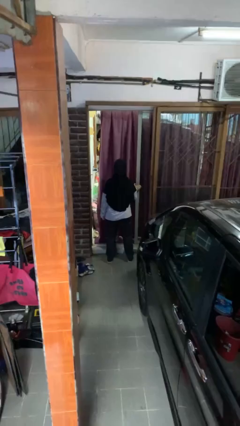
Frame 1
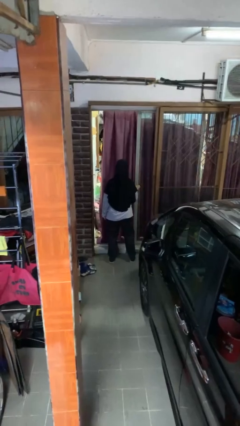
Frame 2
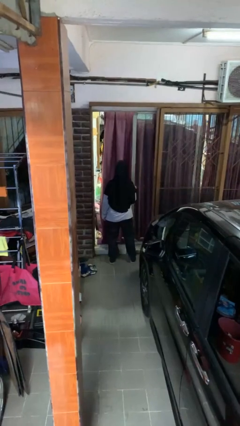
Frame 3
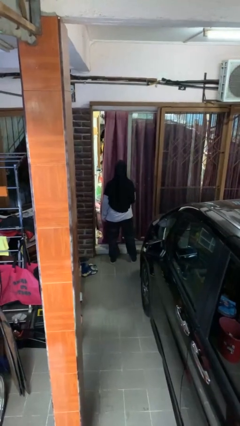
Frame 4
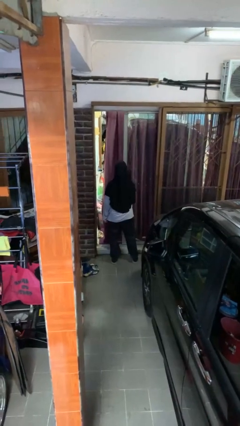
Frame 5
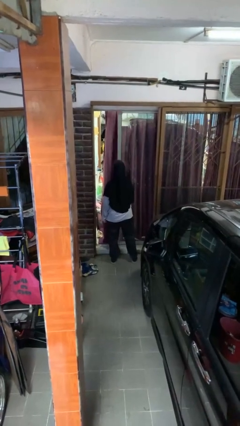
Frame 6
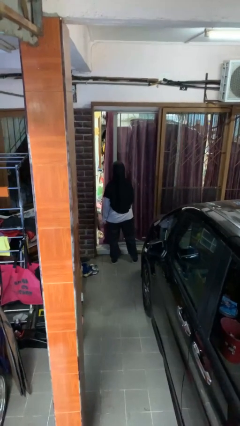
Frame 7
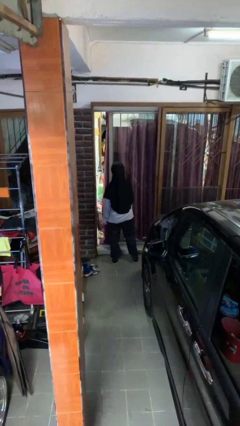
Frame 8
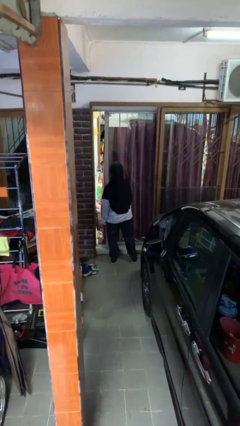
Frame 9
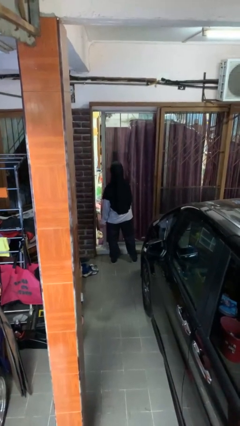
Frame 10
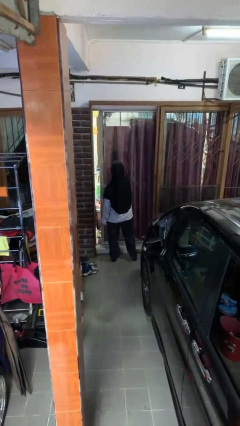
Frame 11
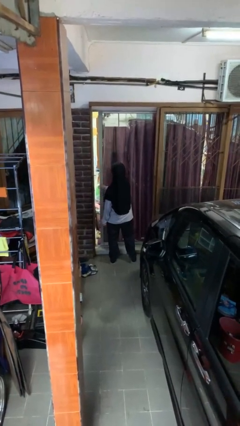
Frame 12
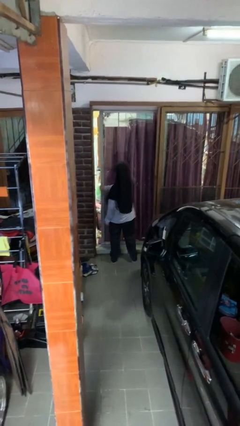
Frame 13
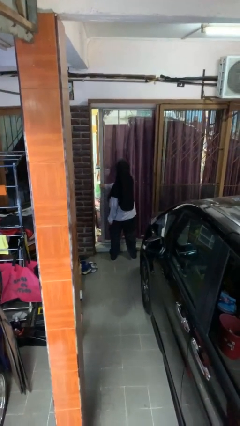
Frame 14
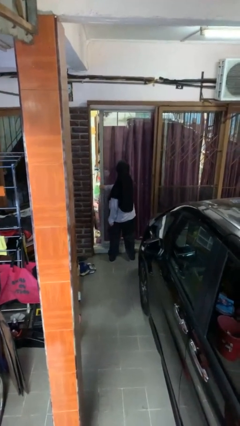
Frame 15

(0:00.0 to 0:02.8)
person closes sliding door

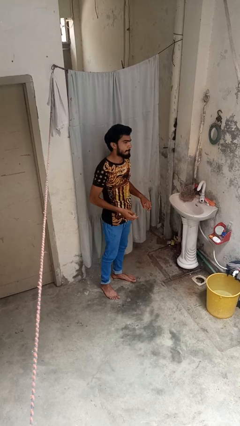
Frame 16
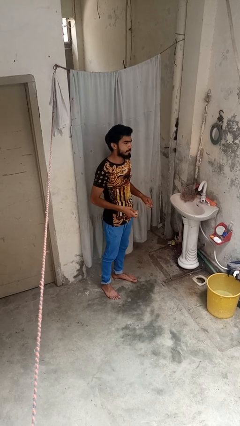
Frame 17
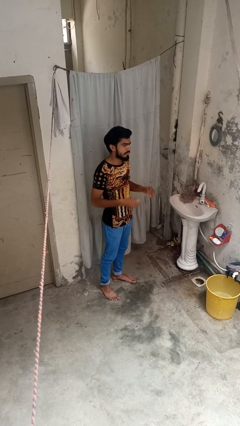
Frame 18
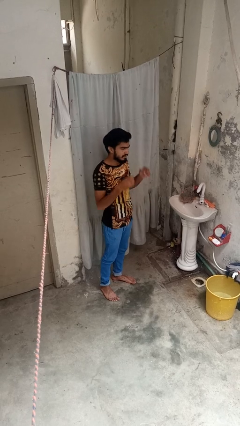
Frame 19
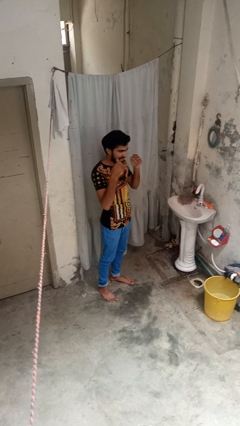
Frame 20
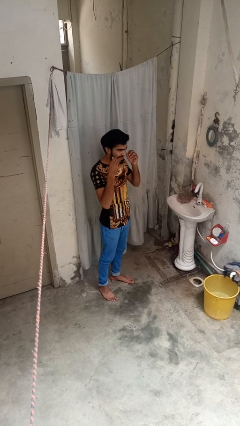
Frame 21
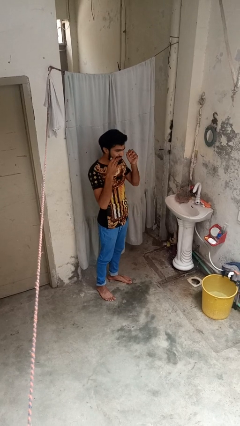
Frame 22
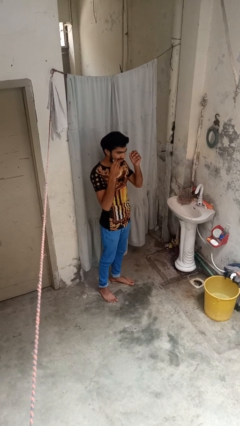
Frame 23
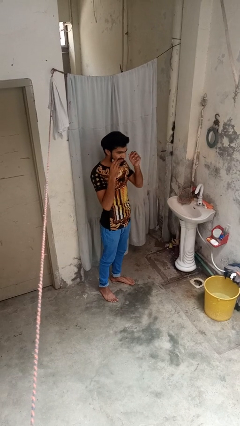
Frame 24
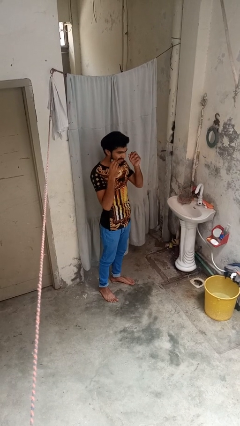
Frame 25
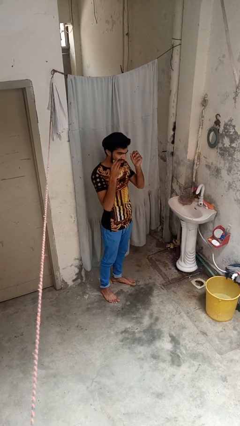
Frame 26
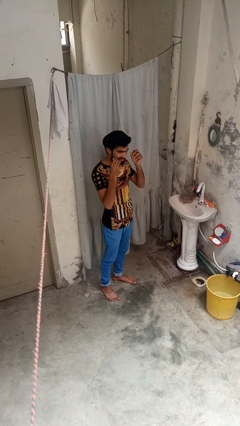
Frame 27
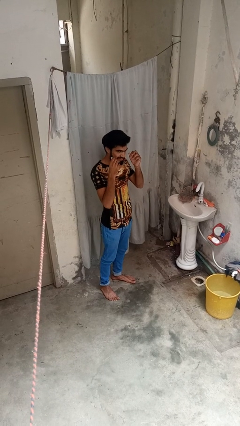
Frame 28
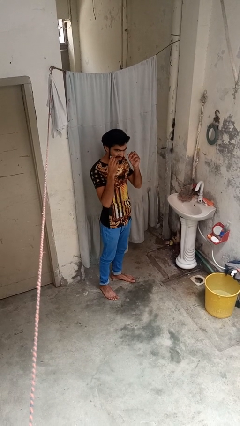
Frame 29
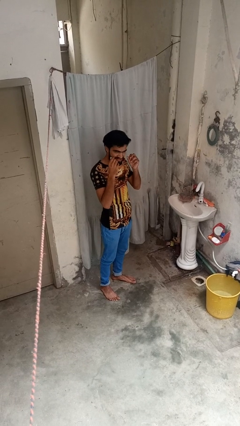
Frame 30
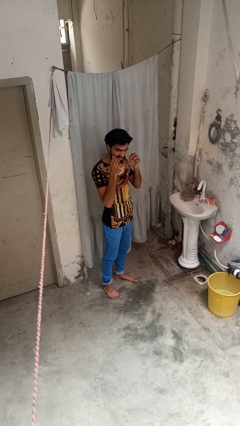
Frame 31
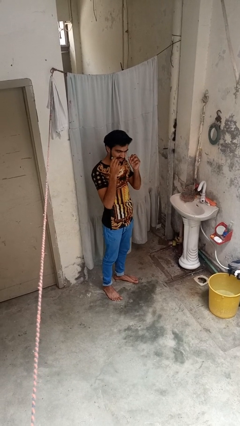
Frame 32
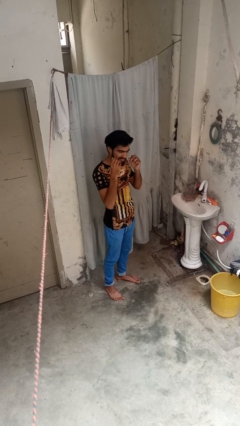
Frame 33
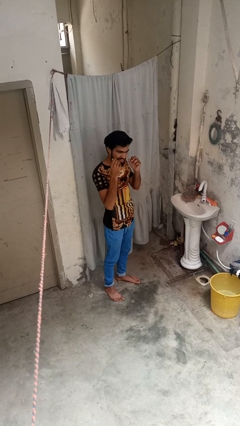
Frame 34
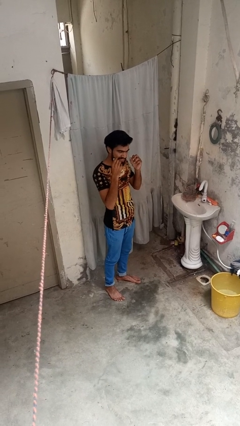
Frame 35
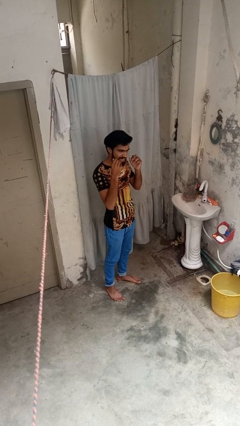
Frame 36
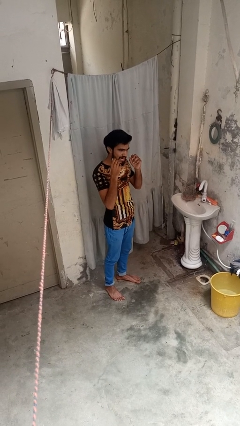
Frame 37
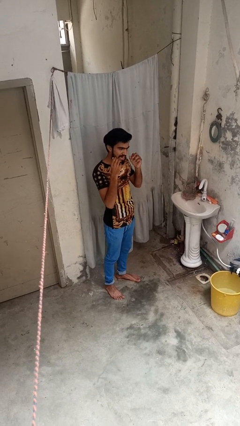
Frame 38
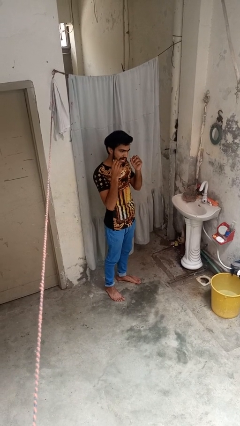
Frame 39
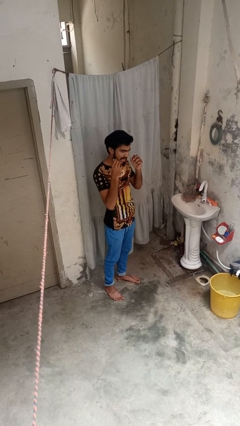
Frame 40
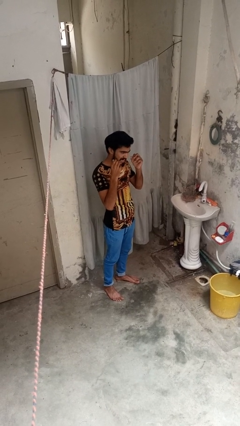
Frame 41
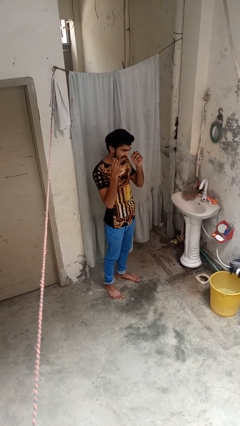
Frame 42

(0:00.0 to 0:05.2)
person flosses

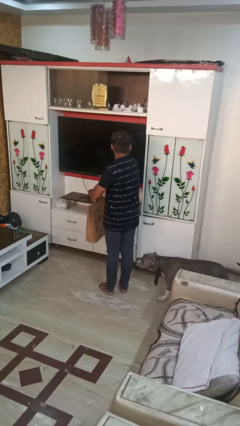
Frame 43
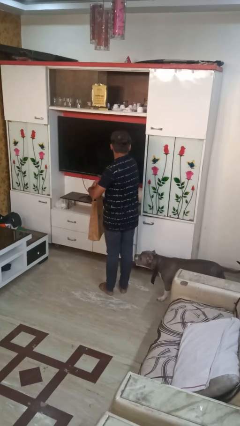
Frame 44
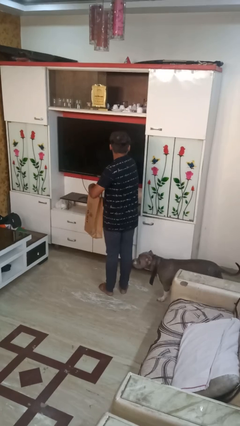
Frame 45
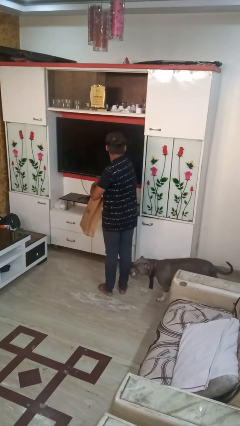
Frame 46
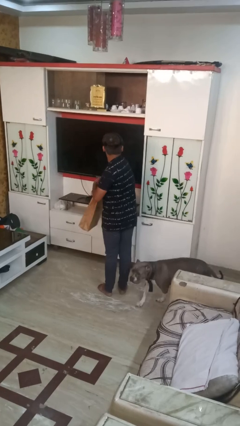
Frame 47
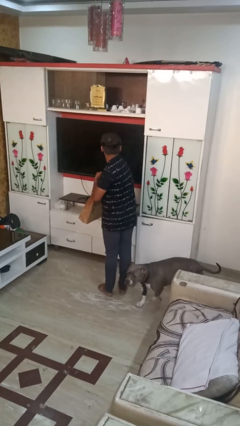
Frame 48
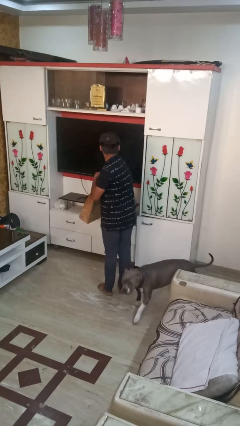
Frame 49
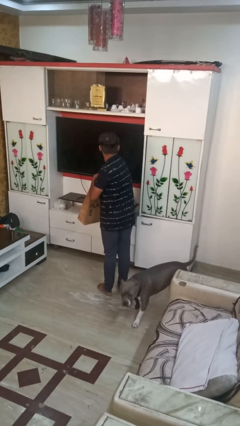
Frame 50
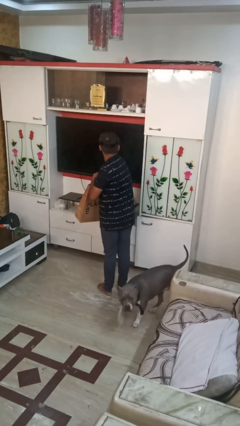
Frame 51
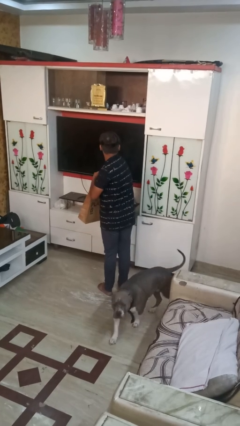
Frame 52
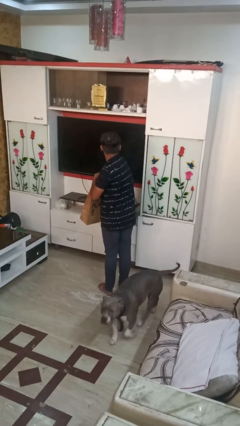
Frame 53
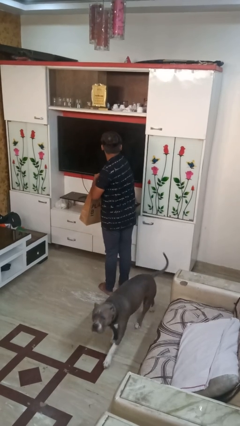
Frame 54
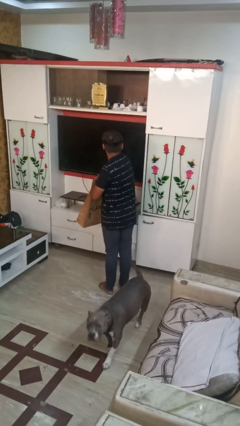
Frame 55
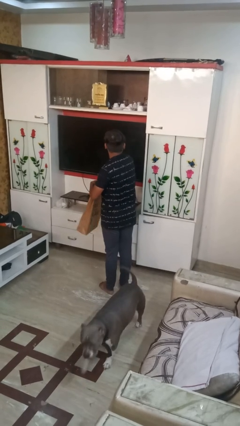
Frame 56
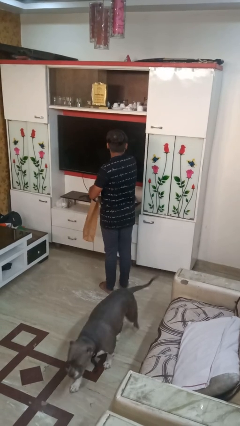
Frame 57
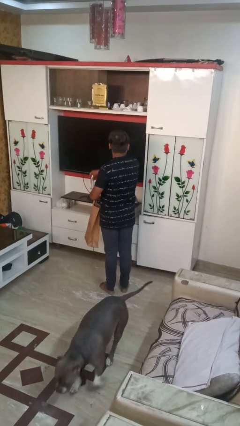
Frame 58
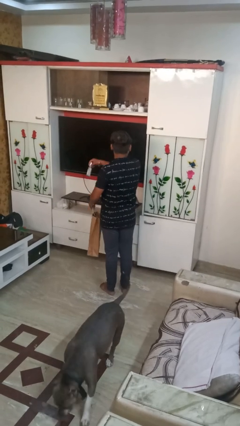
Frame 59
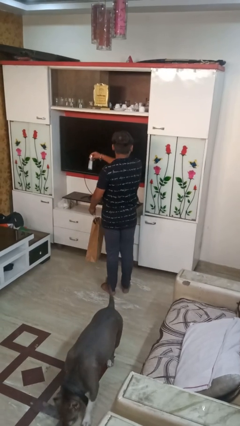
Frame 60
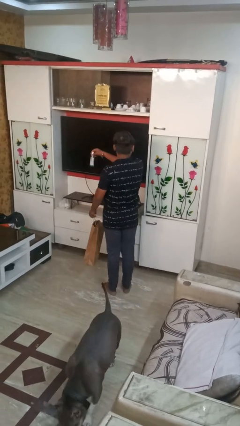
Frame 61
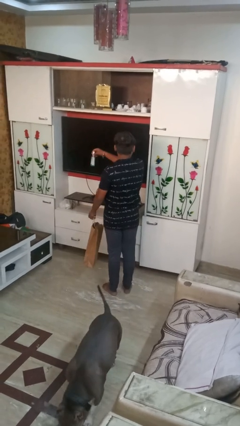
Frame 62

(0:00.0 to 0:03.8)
person takes object from bag

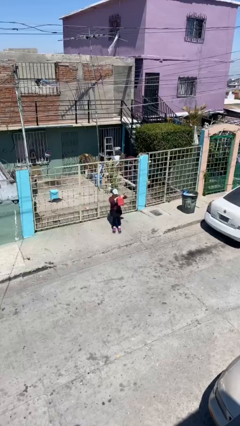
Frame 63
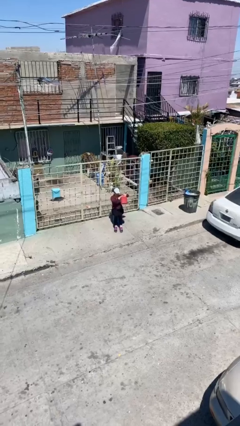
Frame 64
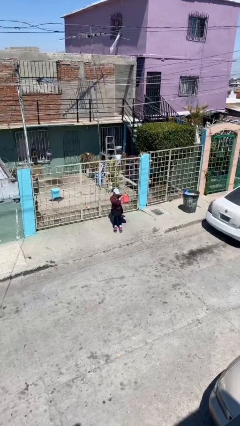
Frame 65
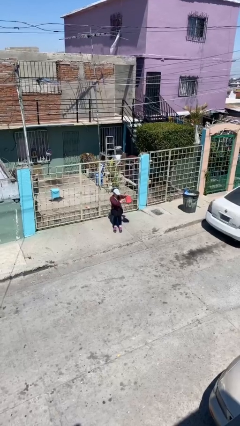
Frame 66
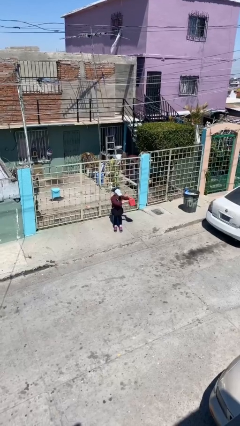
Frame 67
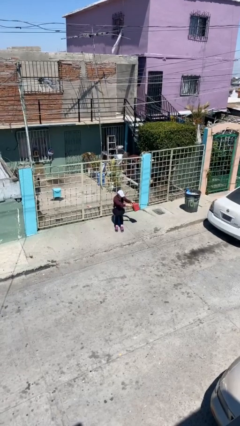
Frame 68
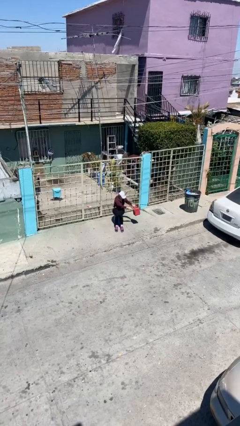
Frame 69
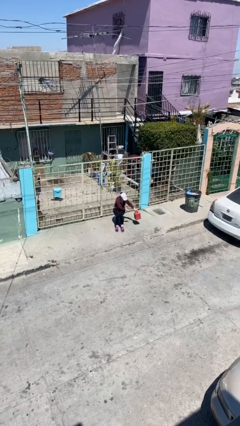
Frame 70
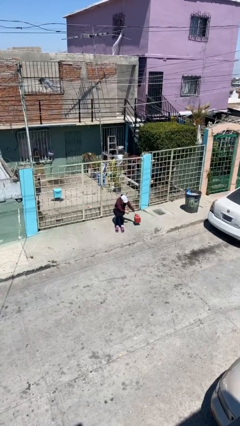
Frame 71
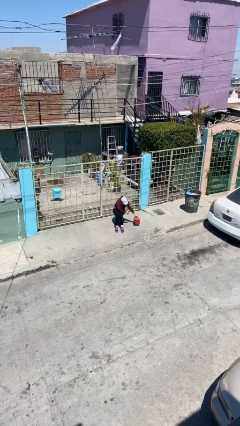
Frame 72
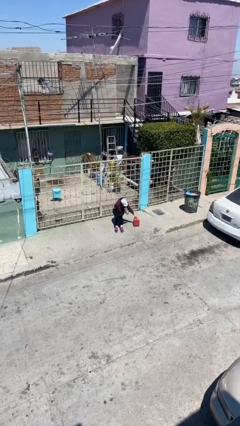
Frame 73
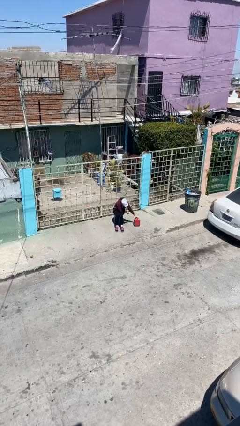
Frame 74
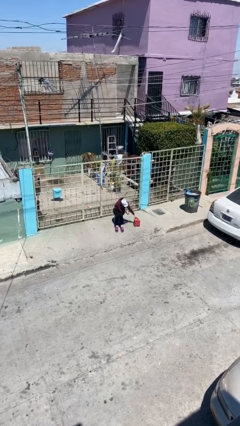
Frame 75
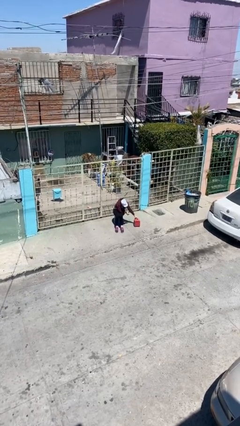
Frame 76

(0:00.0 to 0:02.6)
person puts down object on floor

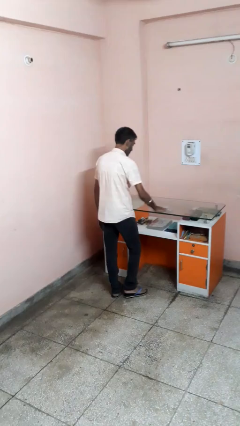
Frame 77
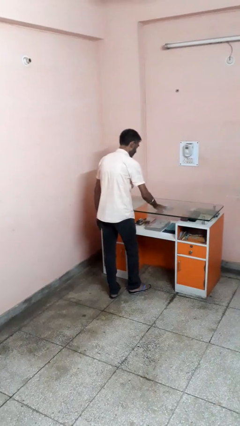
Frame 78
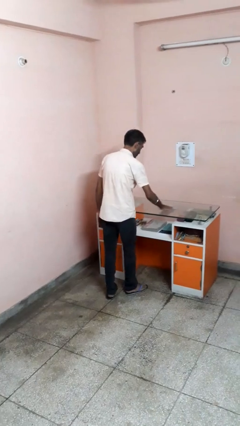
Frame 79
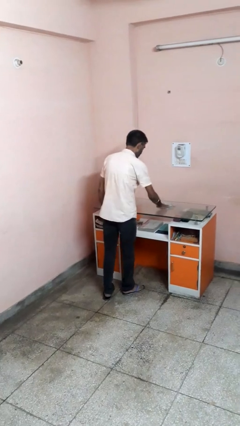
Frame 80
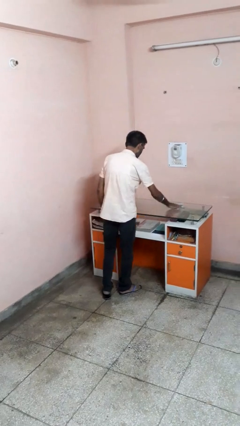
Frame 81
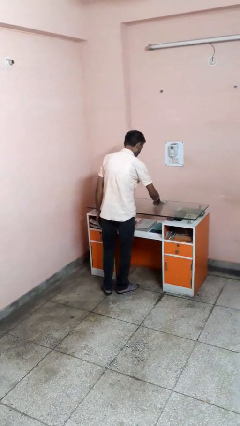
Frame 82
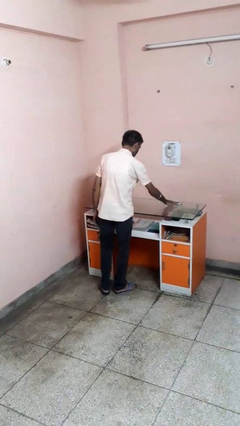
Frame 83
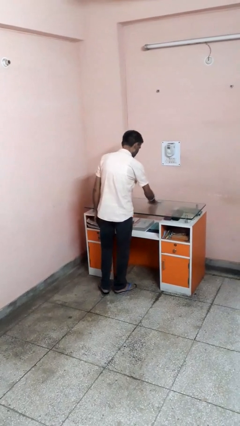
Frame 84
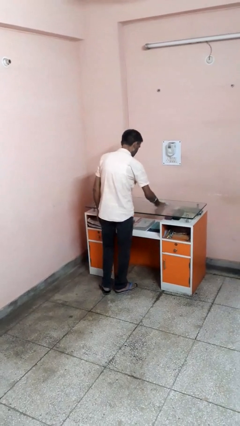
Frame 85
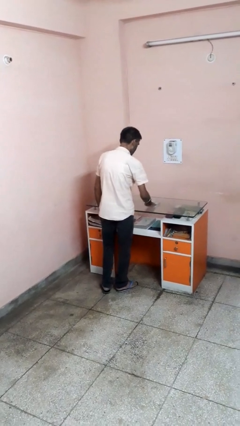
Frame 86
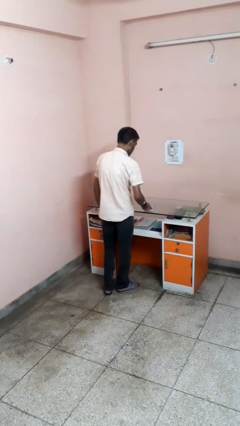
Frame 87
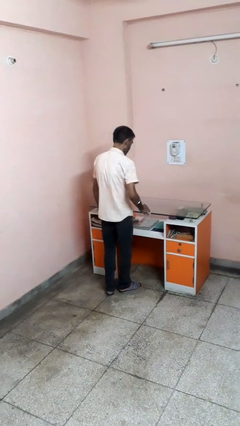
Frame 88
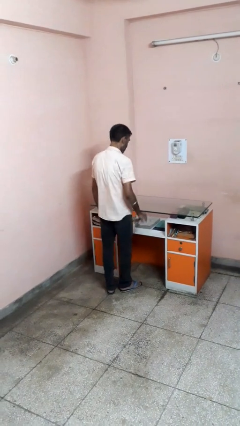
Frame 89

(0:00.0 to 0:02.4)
person cleans table with rag

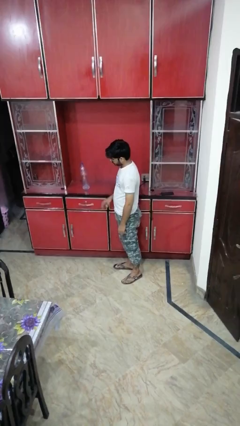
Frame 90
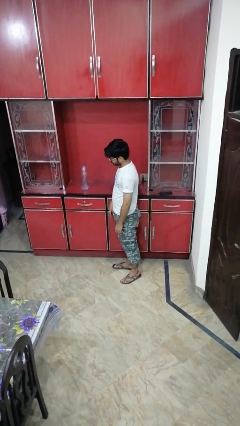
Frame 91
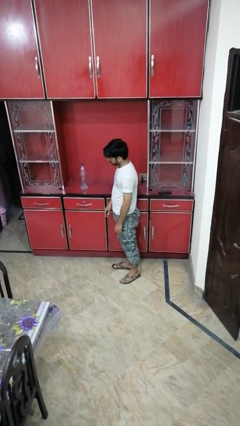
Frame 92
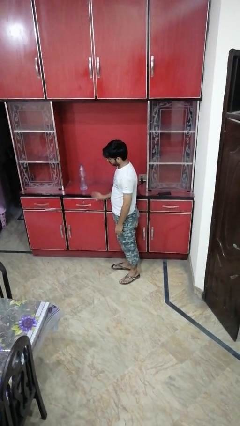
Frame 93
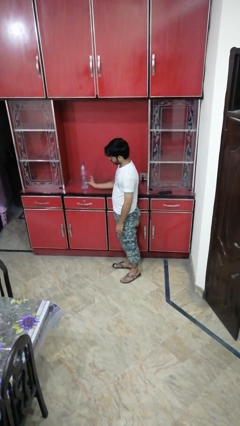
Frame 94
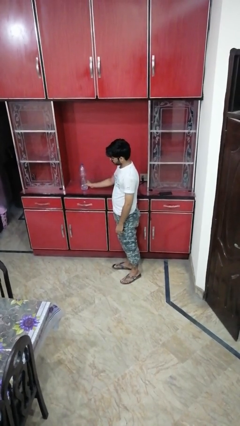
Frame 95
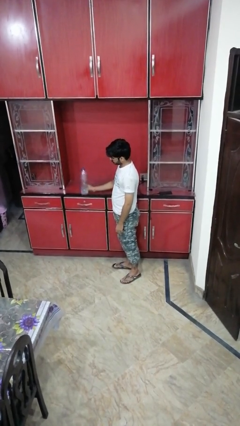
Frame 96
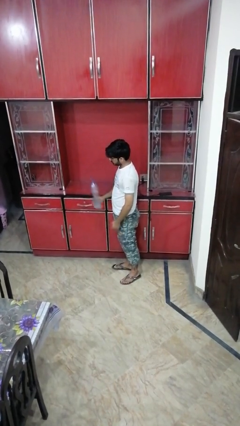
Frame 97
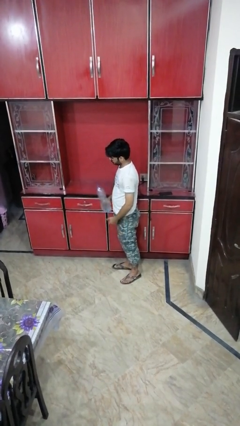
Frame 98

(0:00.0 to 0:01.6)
person picks up object from countertop
